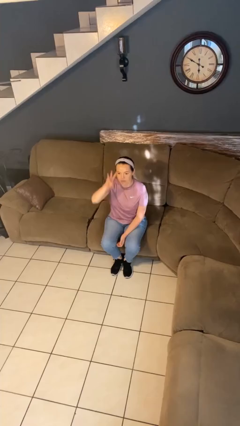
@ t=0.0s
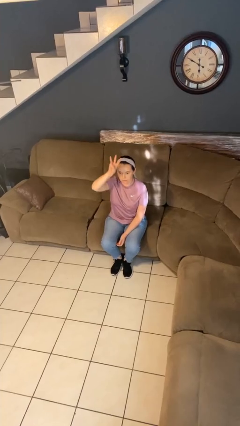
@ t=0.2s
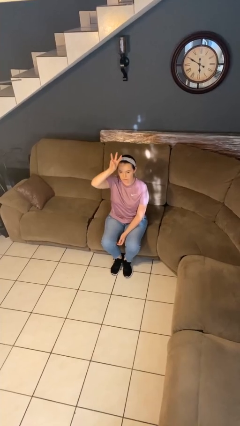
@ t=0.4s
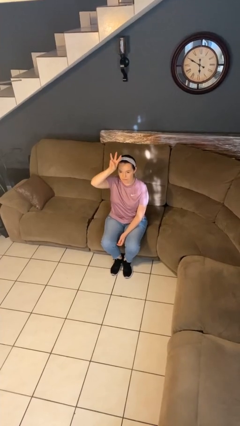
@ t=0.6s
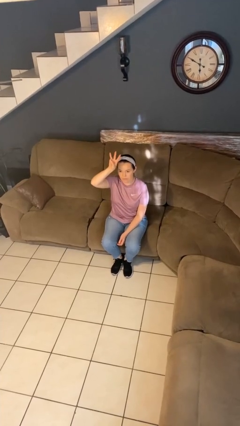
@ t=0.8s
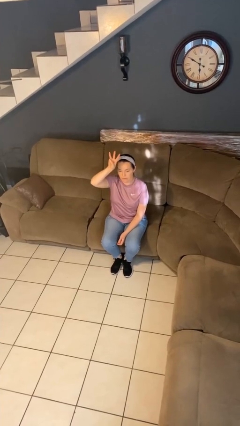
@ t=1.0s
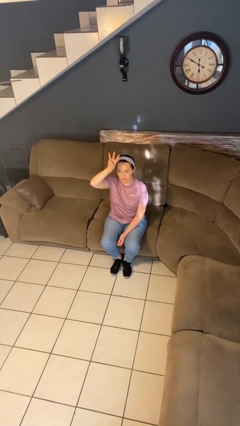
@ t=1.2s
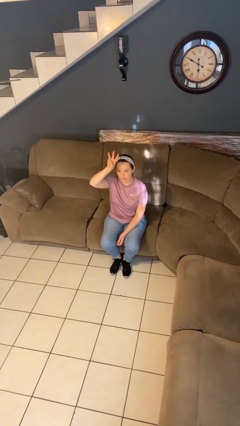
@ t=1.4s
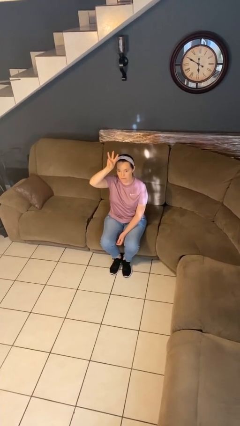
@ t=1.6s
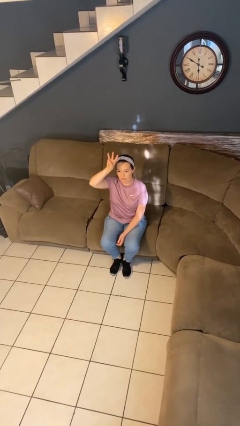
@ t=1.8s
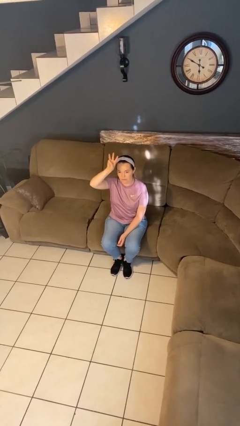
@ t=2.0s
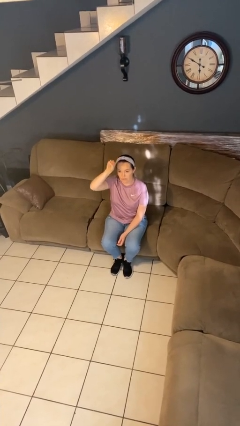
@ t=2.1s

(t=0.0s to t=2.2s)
person gestures number three

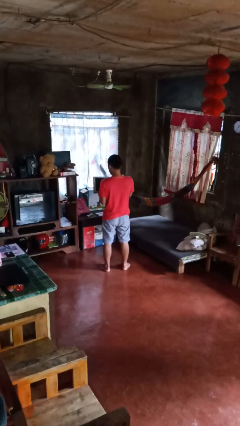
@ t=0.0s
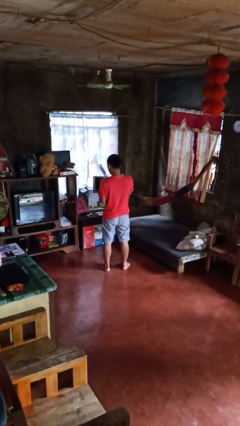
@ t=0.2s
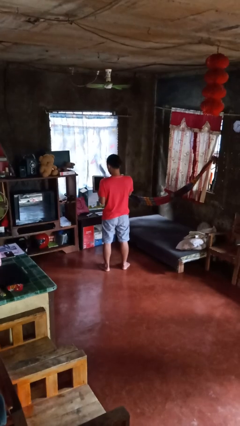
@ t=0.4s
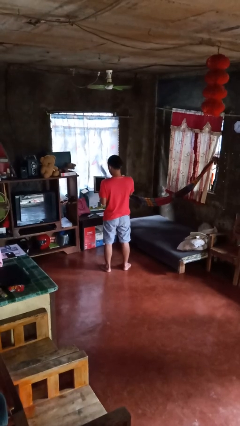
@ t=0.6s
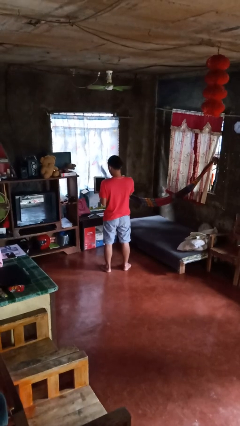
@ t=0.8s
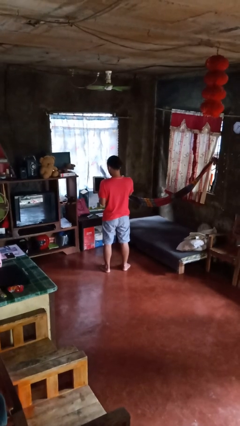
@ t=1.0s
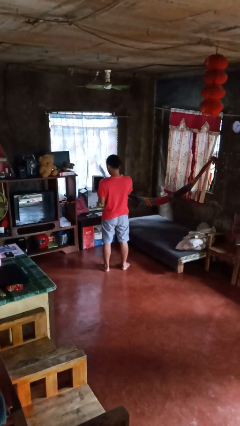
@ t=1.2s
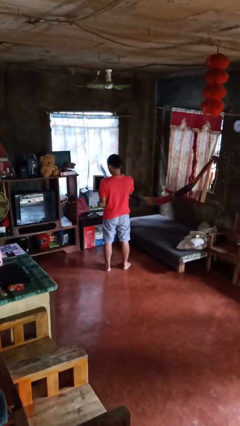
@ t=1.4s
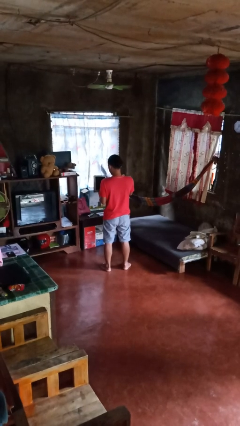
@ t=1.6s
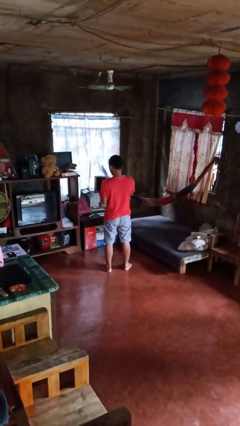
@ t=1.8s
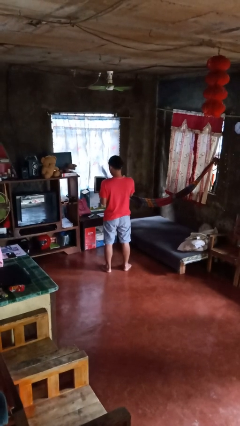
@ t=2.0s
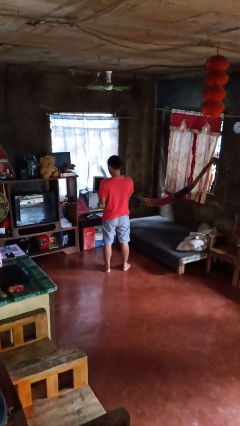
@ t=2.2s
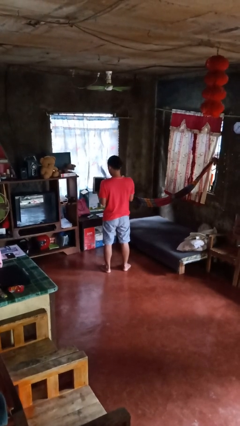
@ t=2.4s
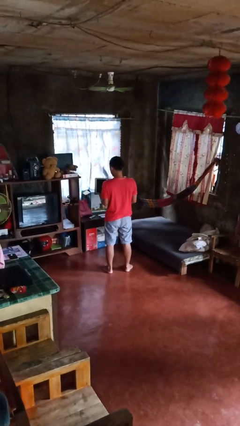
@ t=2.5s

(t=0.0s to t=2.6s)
person interacts with tablet

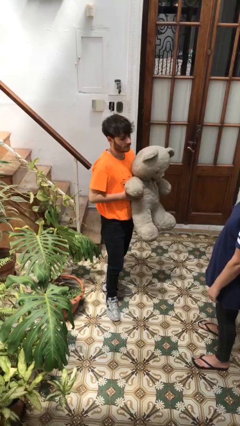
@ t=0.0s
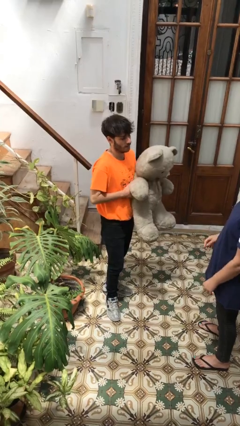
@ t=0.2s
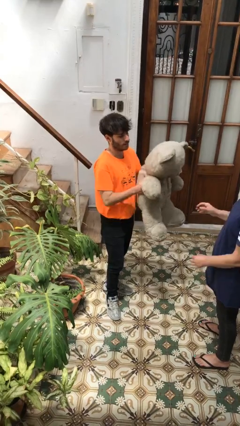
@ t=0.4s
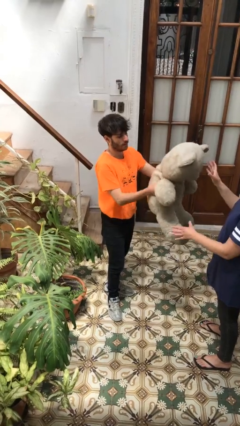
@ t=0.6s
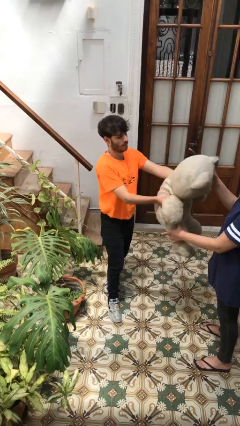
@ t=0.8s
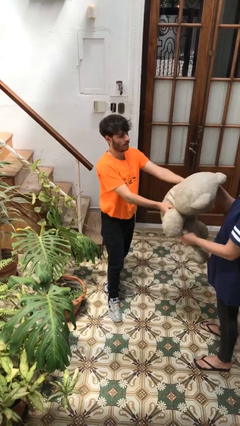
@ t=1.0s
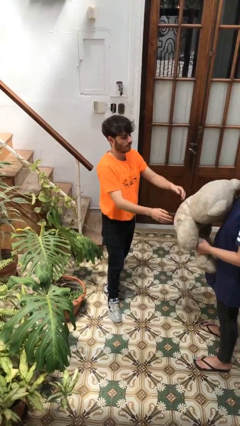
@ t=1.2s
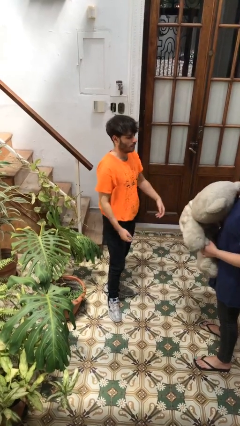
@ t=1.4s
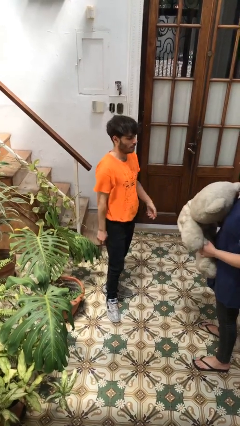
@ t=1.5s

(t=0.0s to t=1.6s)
person transfers object to person

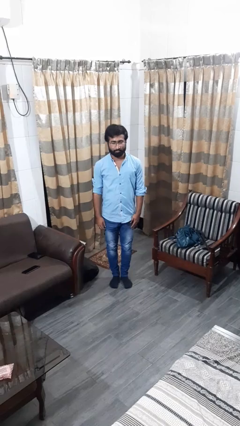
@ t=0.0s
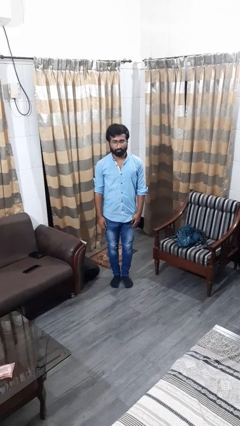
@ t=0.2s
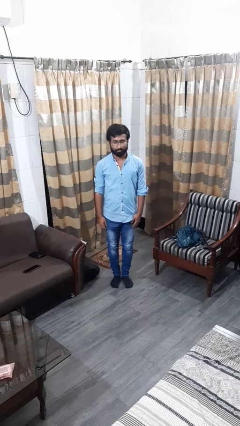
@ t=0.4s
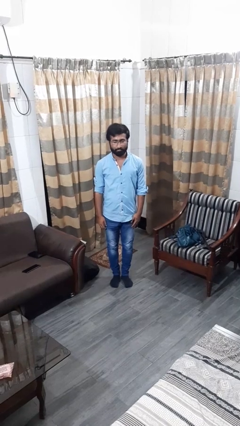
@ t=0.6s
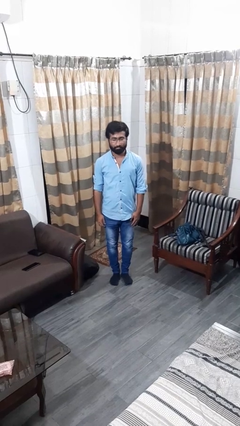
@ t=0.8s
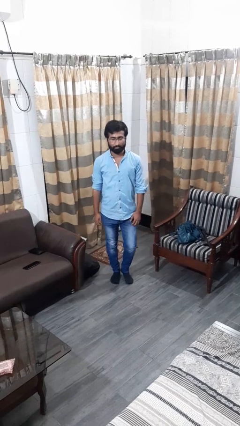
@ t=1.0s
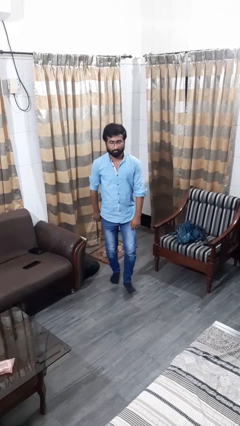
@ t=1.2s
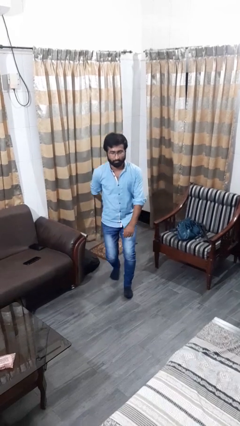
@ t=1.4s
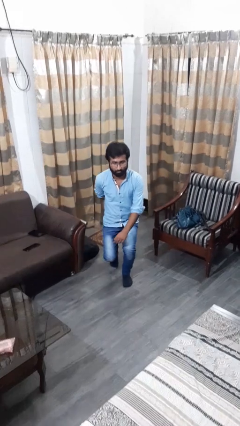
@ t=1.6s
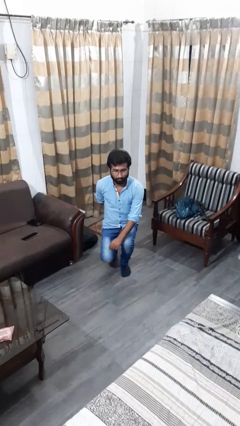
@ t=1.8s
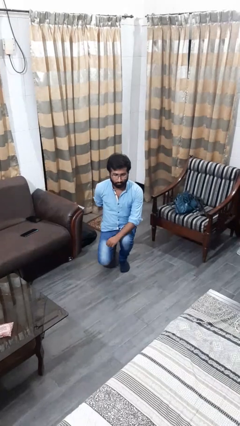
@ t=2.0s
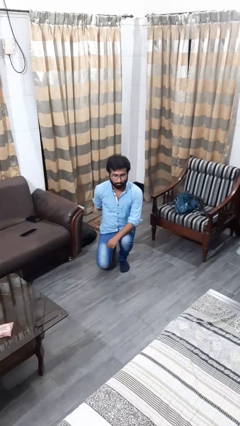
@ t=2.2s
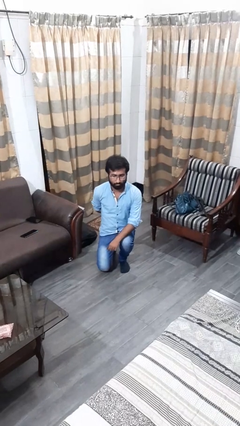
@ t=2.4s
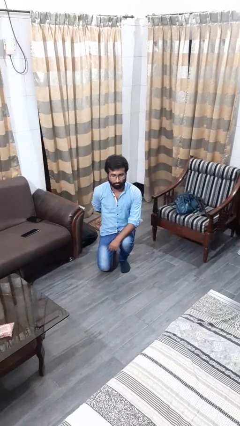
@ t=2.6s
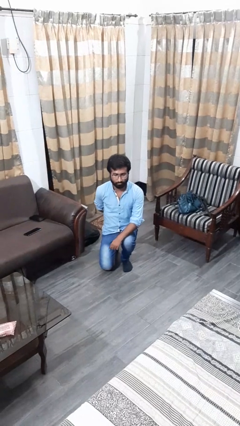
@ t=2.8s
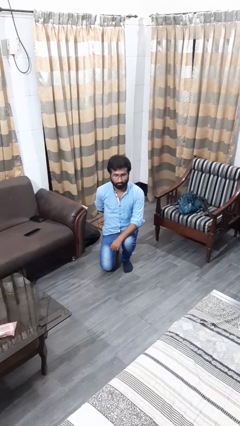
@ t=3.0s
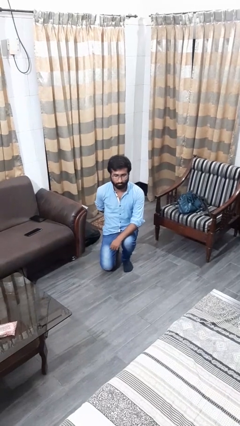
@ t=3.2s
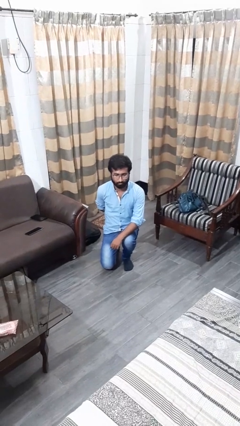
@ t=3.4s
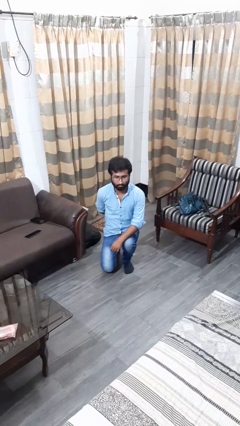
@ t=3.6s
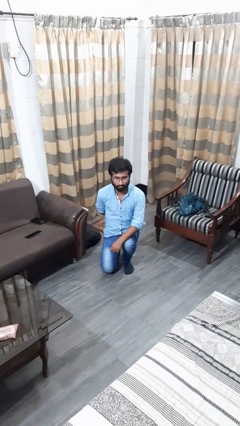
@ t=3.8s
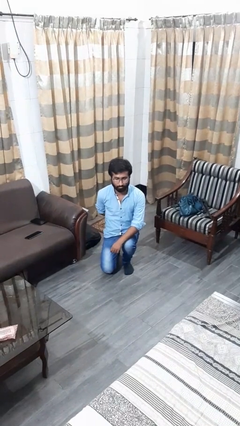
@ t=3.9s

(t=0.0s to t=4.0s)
person kneels

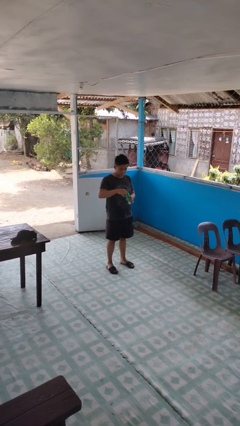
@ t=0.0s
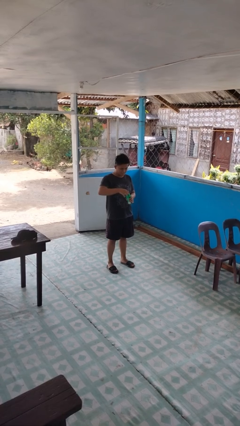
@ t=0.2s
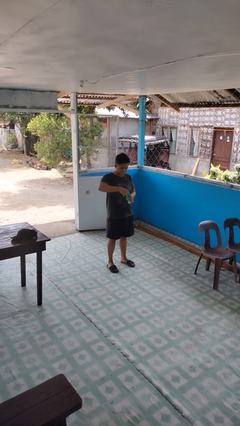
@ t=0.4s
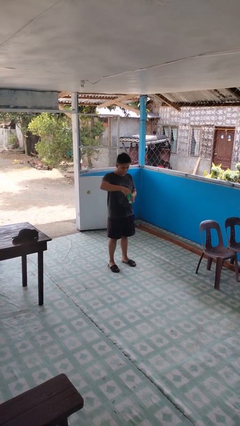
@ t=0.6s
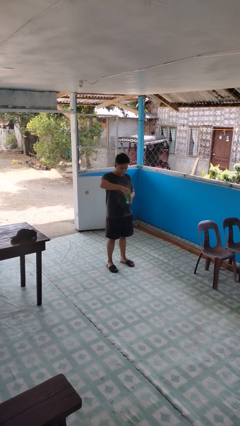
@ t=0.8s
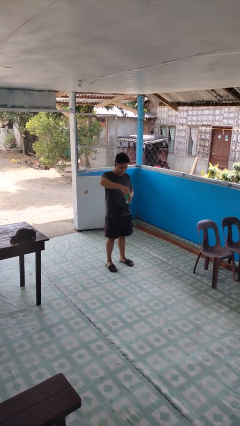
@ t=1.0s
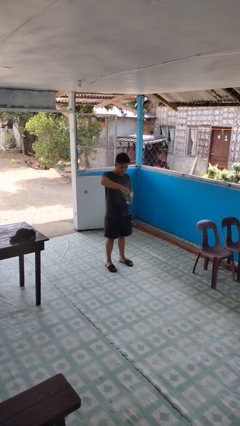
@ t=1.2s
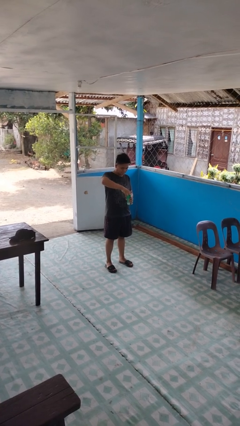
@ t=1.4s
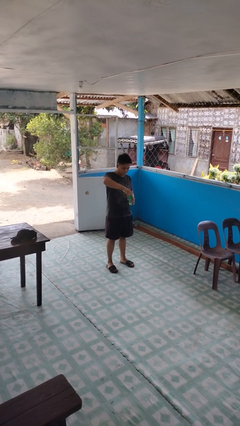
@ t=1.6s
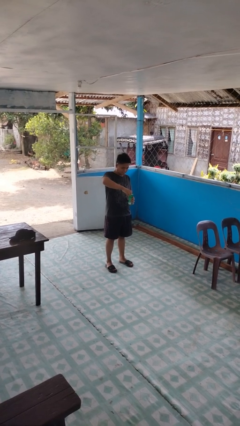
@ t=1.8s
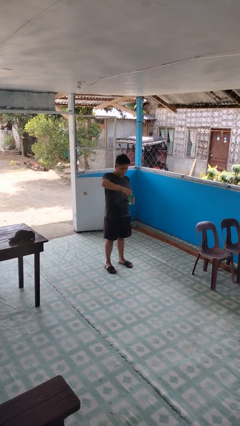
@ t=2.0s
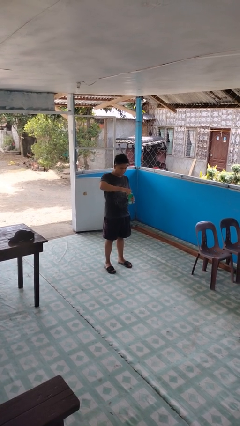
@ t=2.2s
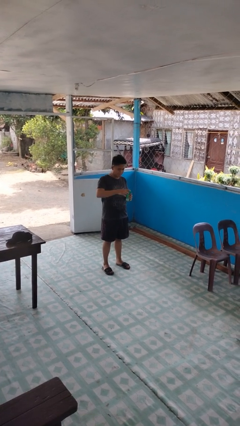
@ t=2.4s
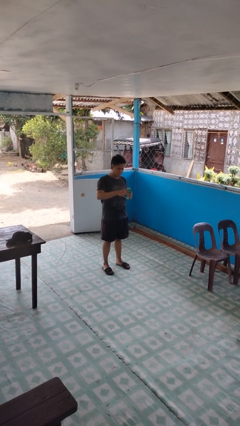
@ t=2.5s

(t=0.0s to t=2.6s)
person opens beverage can

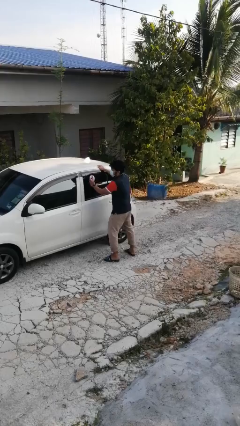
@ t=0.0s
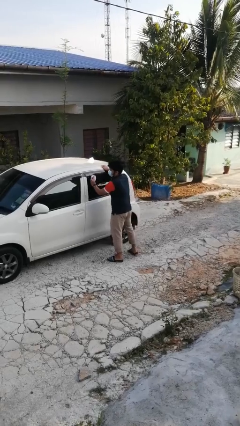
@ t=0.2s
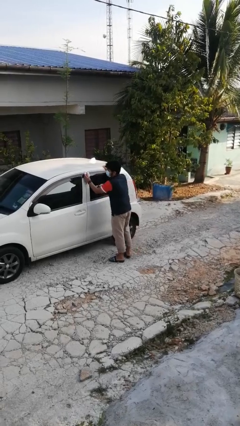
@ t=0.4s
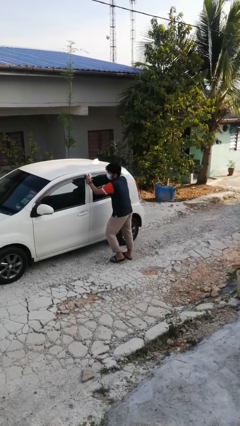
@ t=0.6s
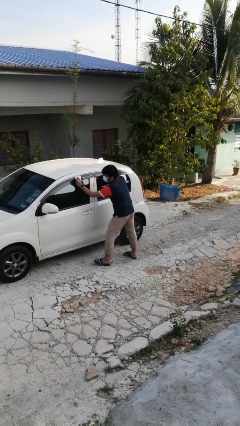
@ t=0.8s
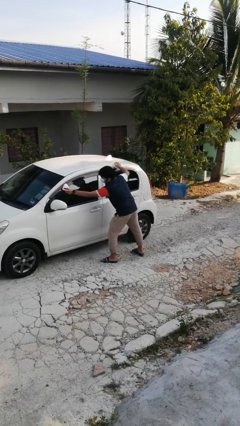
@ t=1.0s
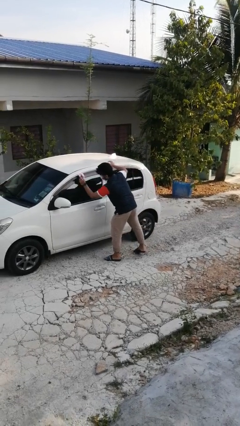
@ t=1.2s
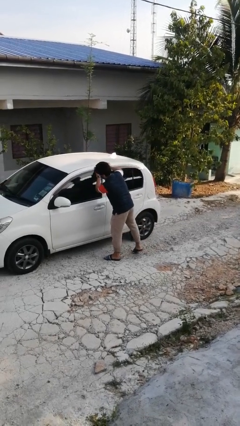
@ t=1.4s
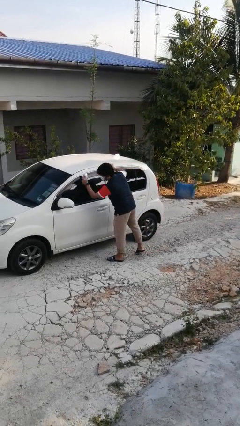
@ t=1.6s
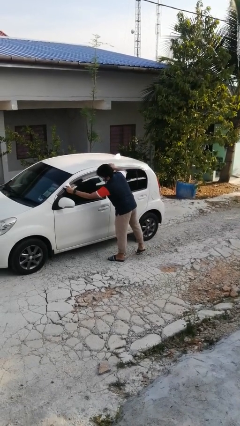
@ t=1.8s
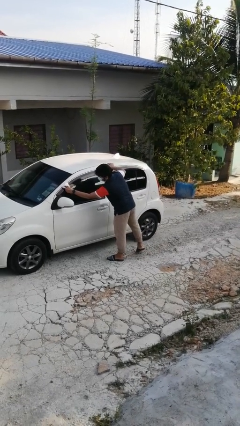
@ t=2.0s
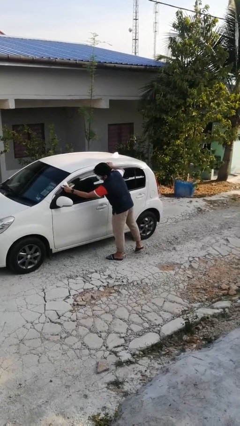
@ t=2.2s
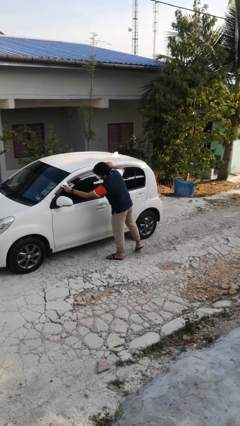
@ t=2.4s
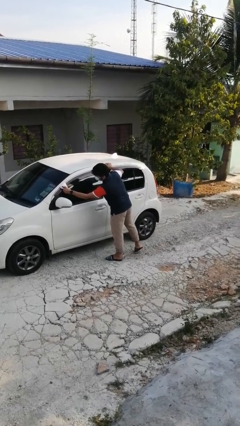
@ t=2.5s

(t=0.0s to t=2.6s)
person polishes car with rag

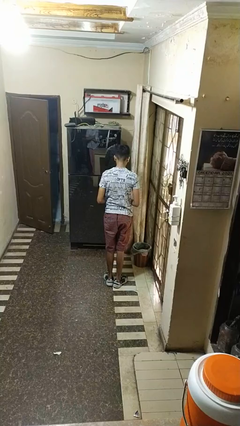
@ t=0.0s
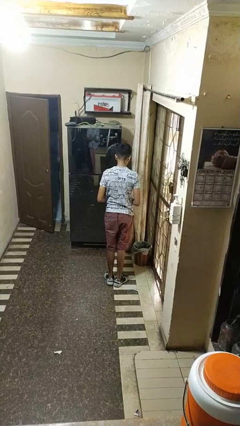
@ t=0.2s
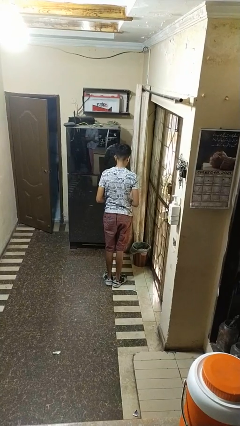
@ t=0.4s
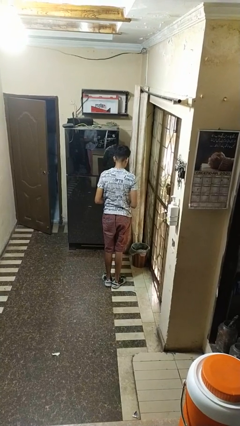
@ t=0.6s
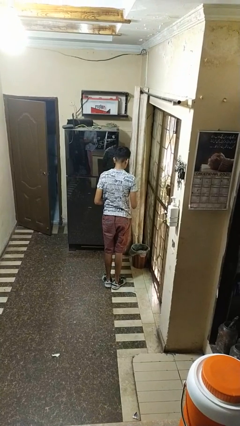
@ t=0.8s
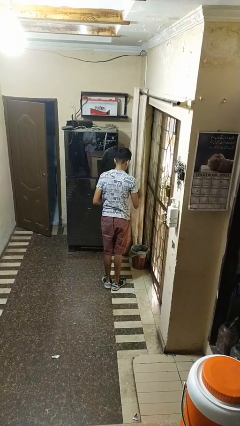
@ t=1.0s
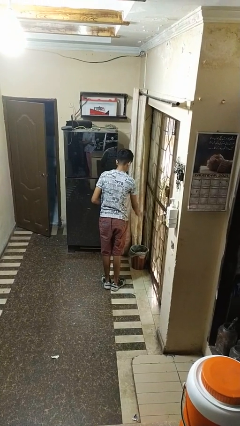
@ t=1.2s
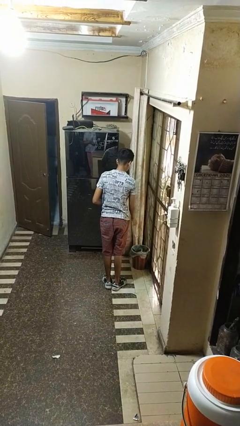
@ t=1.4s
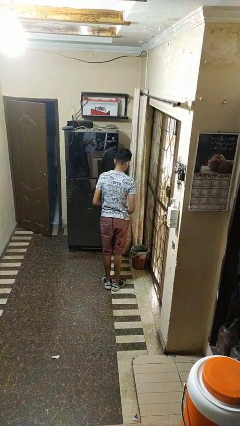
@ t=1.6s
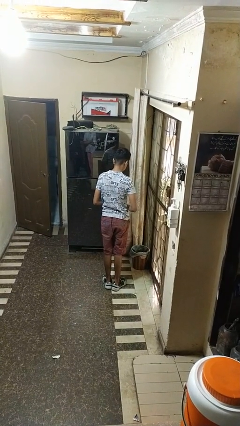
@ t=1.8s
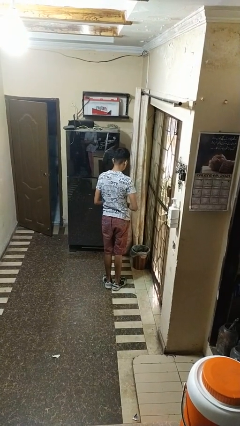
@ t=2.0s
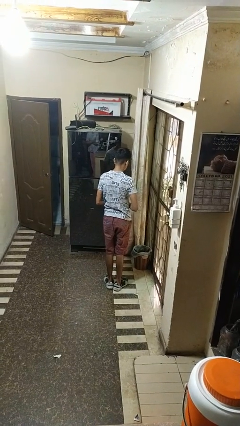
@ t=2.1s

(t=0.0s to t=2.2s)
person discards trash
